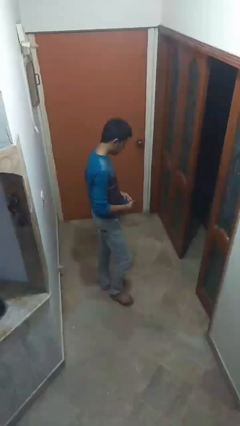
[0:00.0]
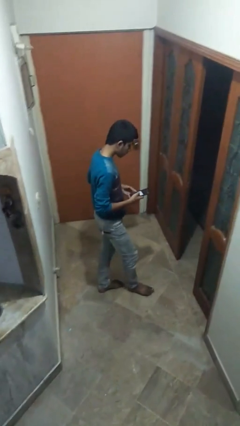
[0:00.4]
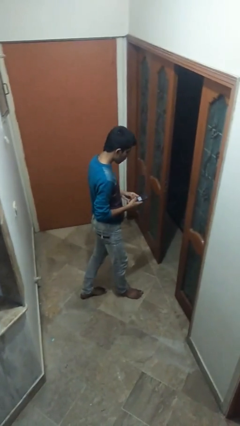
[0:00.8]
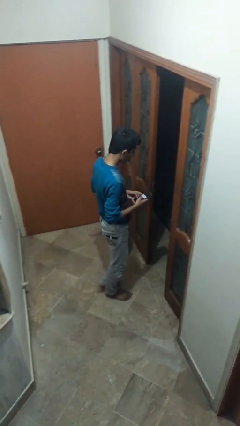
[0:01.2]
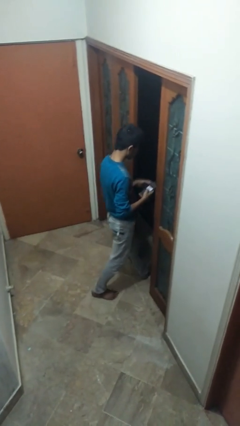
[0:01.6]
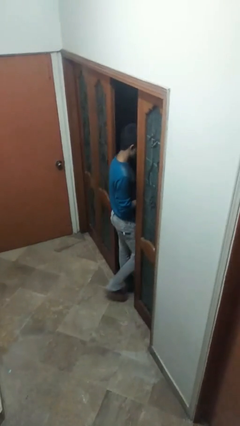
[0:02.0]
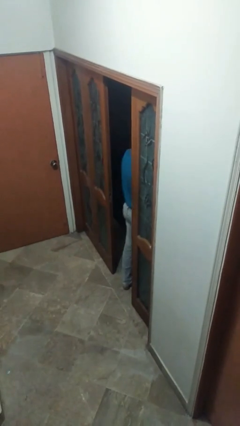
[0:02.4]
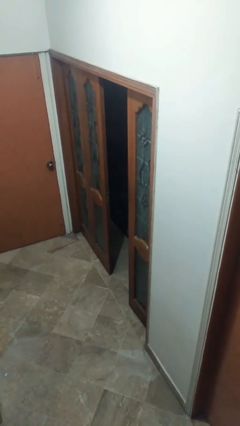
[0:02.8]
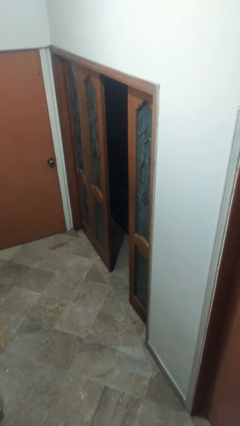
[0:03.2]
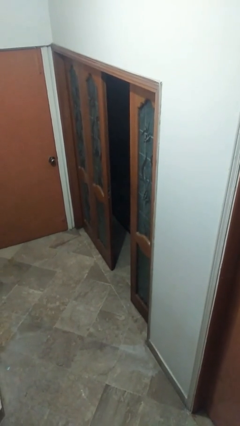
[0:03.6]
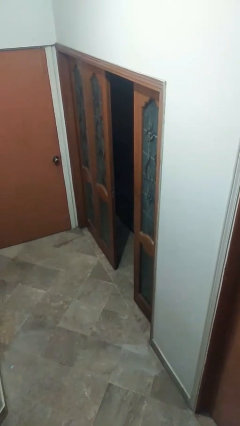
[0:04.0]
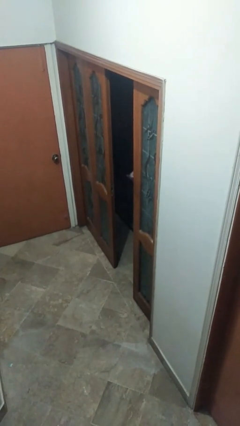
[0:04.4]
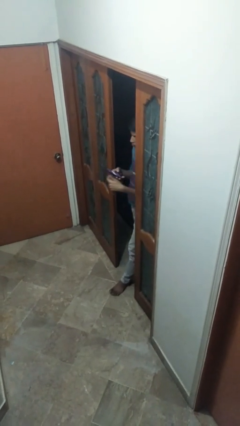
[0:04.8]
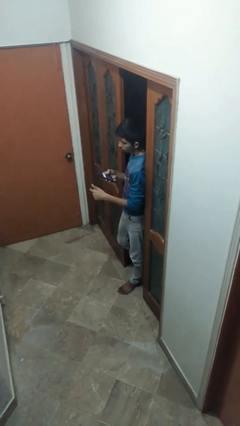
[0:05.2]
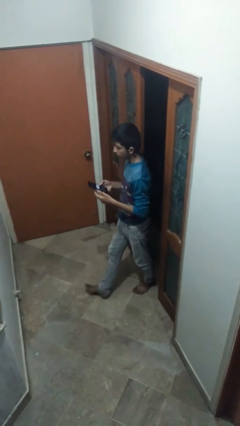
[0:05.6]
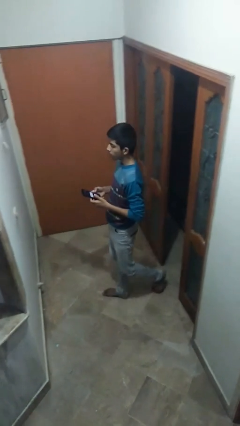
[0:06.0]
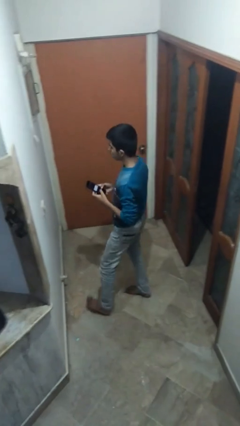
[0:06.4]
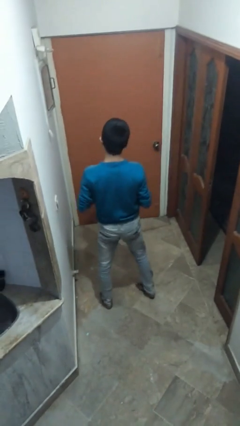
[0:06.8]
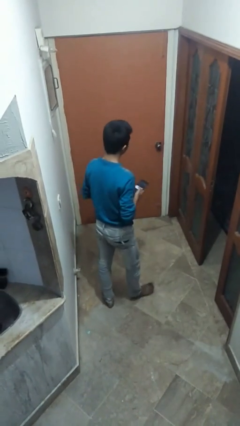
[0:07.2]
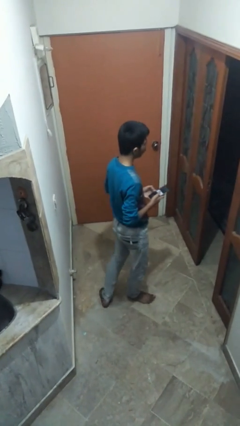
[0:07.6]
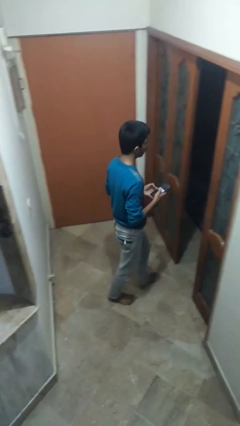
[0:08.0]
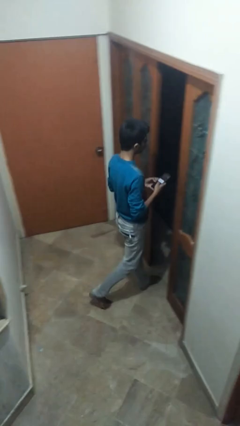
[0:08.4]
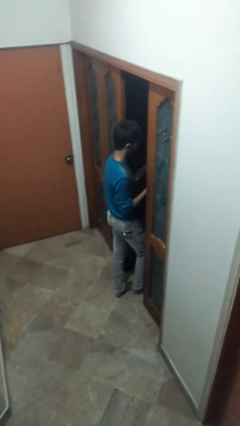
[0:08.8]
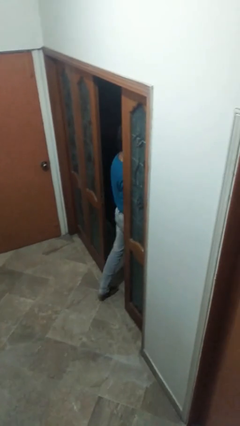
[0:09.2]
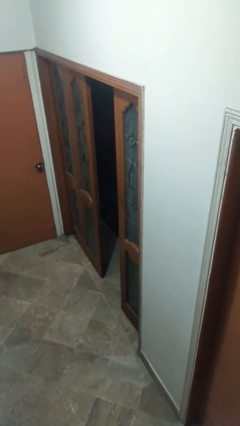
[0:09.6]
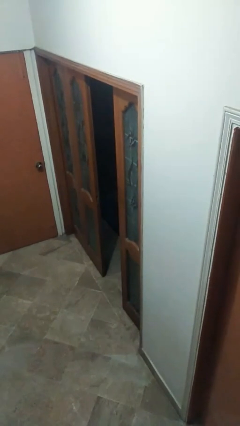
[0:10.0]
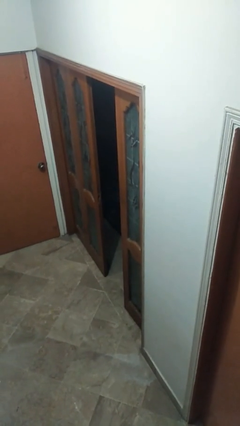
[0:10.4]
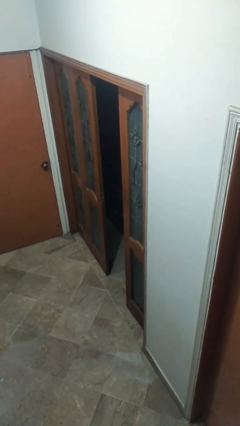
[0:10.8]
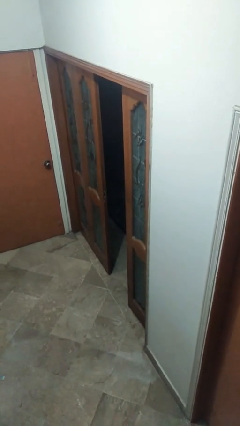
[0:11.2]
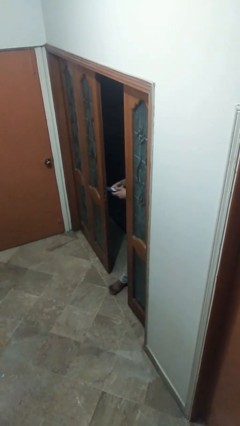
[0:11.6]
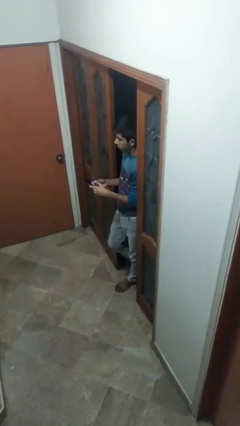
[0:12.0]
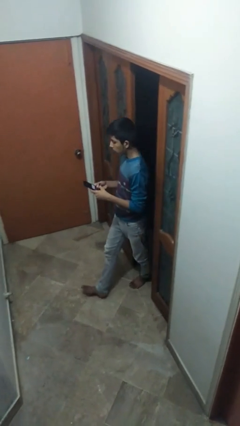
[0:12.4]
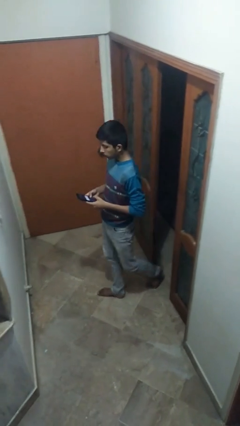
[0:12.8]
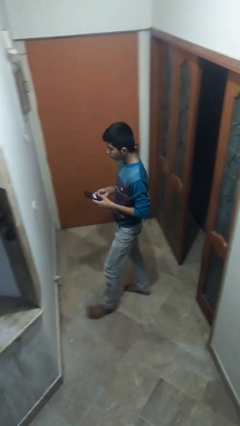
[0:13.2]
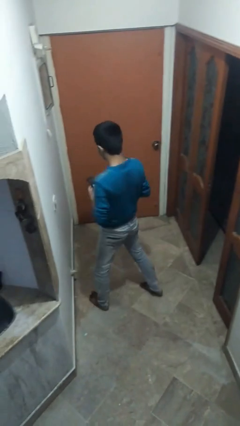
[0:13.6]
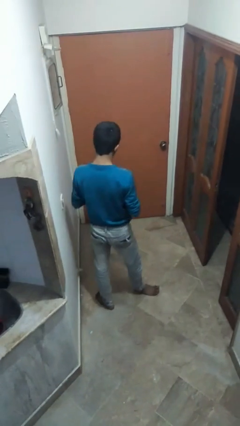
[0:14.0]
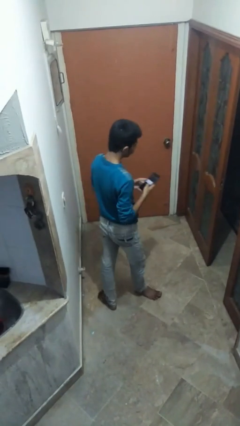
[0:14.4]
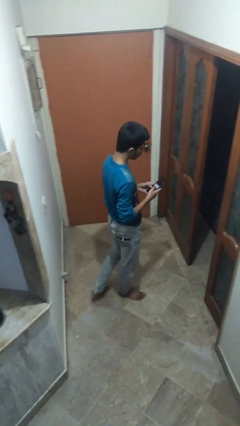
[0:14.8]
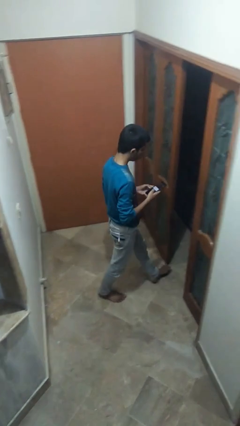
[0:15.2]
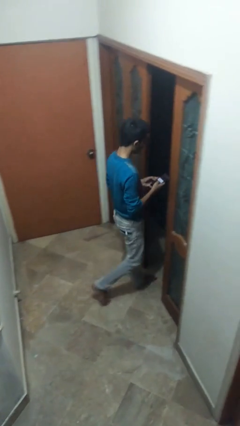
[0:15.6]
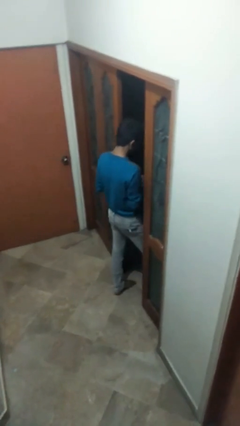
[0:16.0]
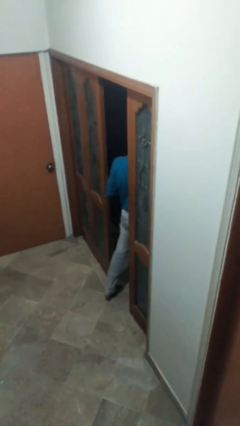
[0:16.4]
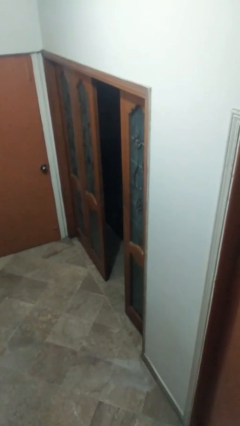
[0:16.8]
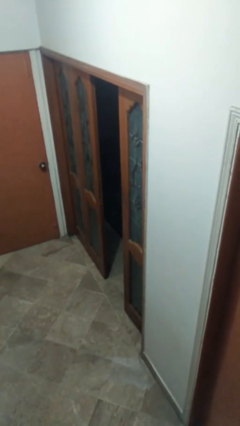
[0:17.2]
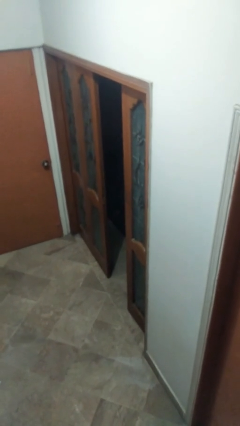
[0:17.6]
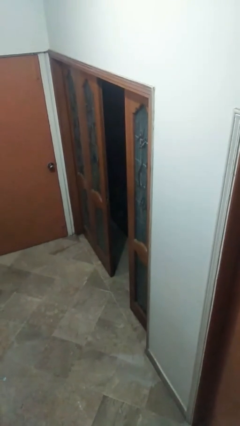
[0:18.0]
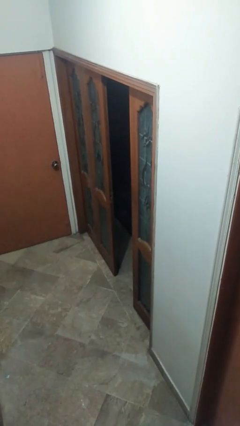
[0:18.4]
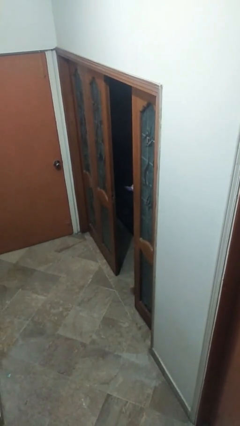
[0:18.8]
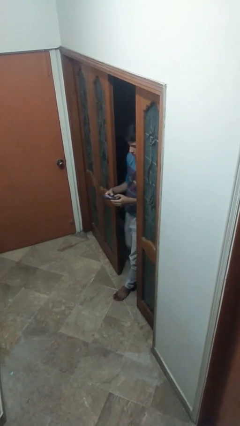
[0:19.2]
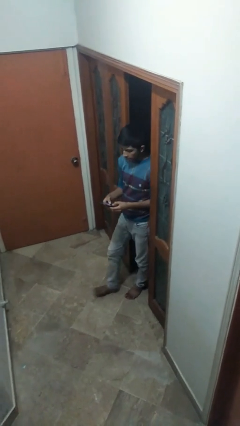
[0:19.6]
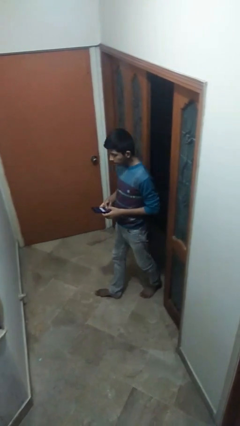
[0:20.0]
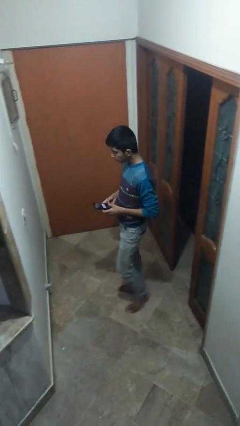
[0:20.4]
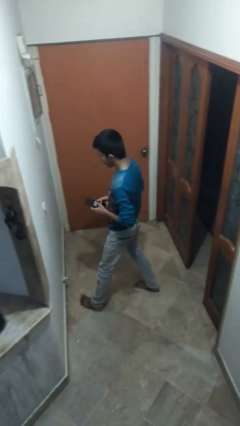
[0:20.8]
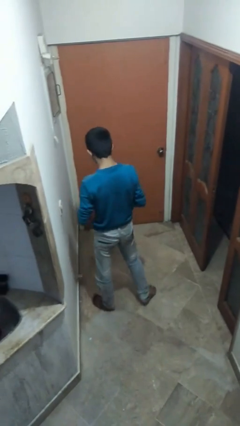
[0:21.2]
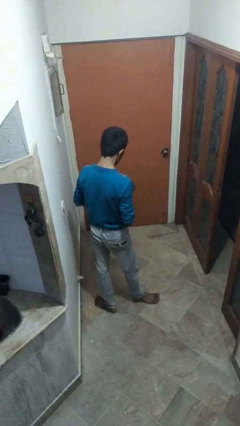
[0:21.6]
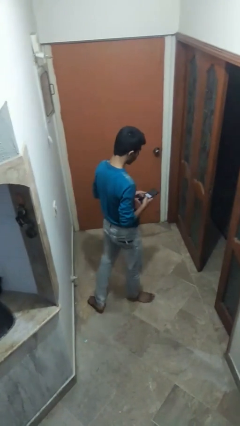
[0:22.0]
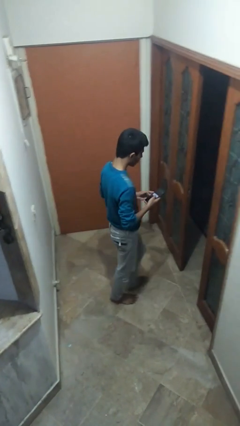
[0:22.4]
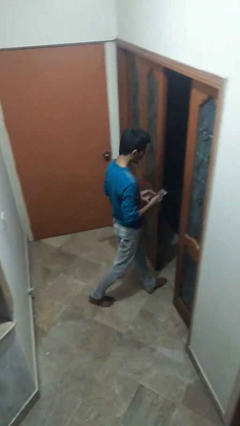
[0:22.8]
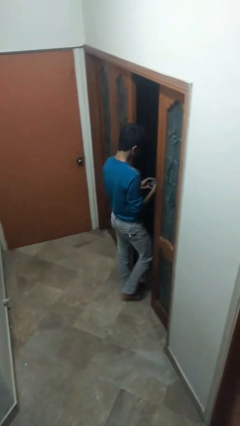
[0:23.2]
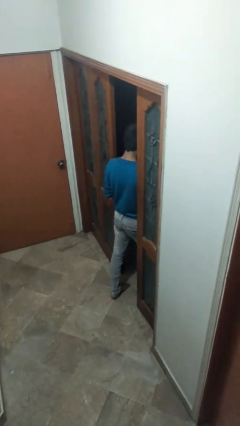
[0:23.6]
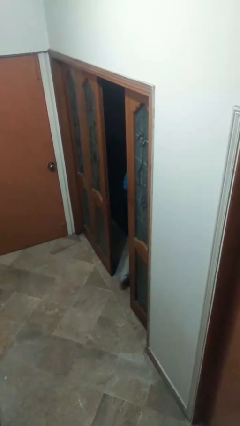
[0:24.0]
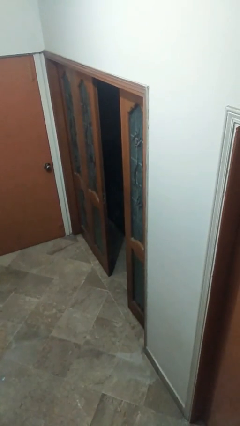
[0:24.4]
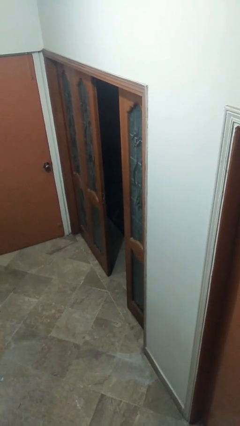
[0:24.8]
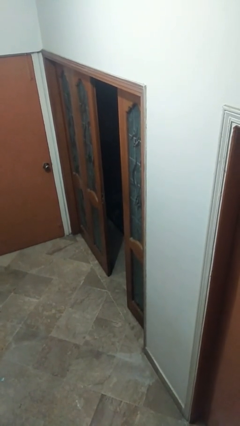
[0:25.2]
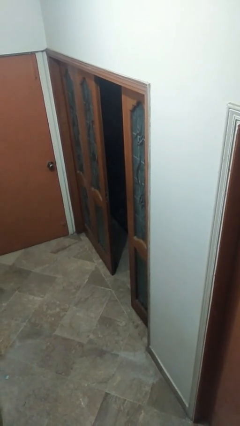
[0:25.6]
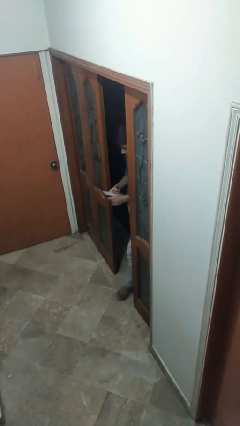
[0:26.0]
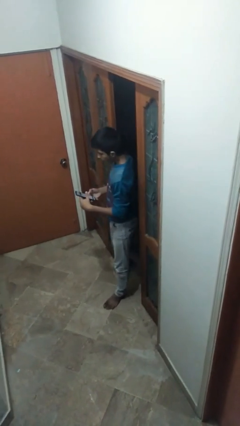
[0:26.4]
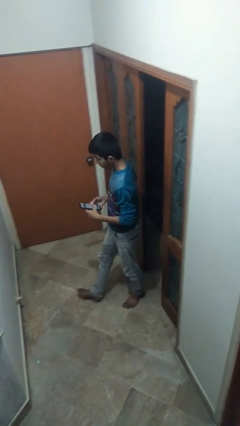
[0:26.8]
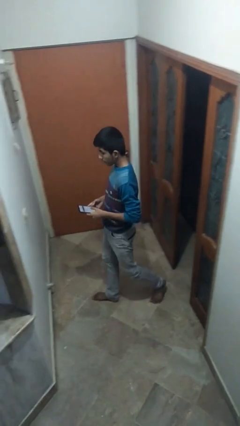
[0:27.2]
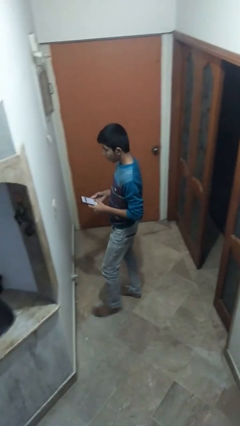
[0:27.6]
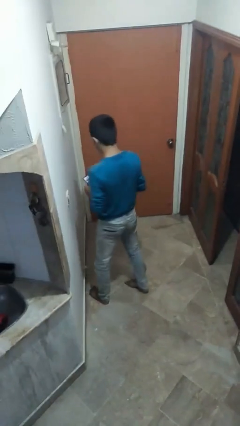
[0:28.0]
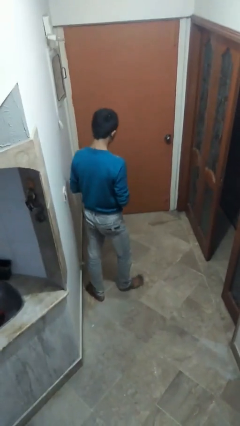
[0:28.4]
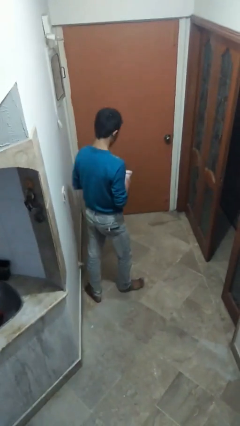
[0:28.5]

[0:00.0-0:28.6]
person texts on phone

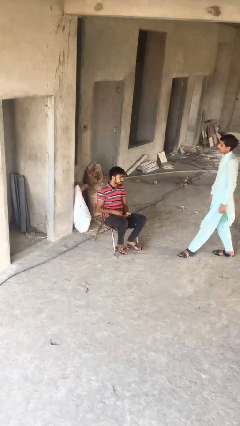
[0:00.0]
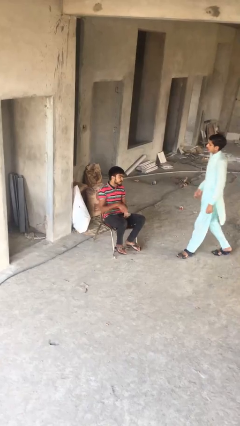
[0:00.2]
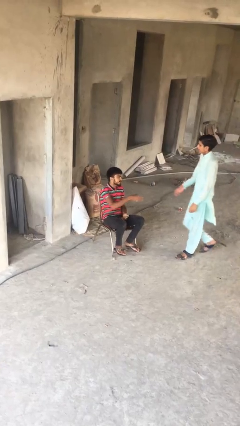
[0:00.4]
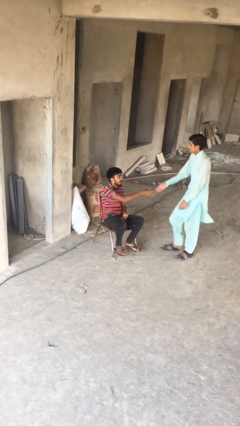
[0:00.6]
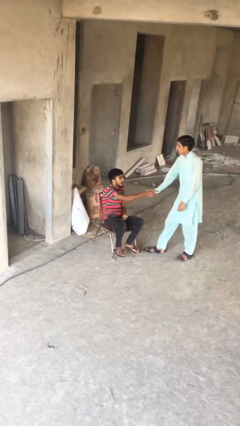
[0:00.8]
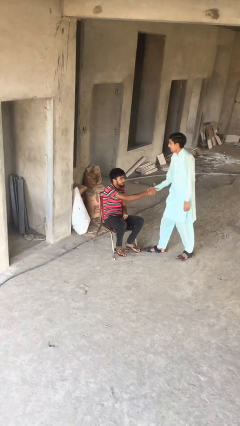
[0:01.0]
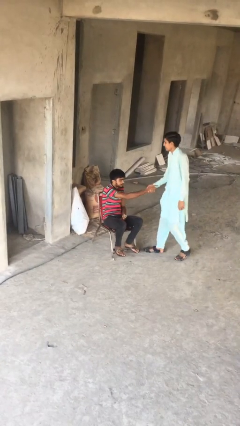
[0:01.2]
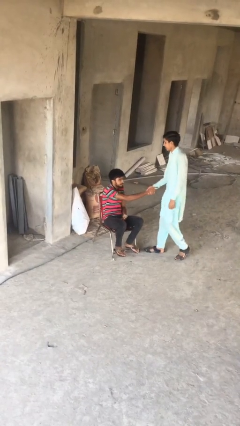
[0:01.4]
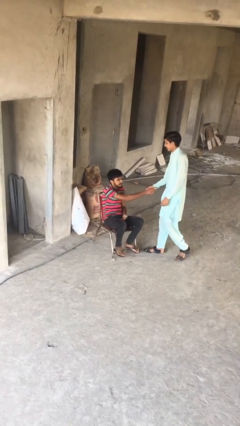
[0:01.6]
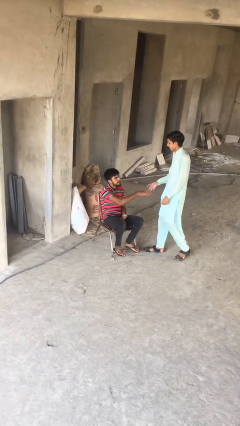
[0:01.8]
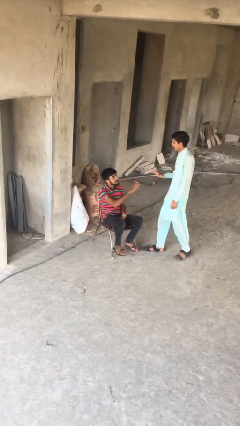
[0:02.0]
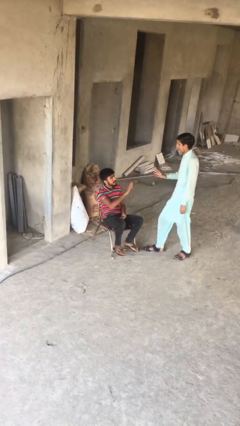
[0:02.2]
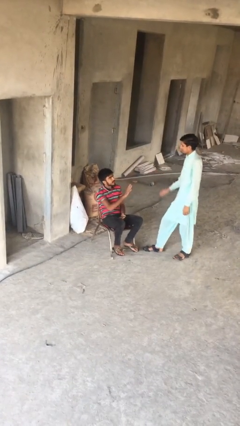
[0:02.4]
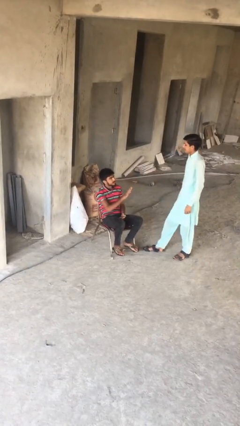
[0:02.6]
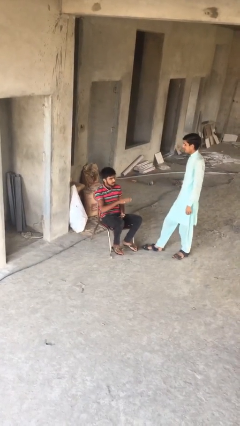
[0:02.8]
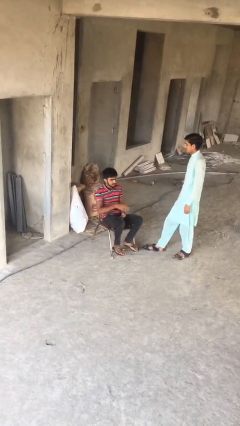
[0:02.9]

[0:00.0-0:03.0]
person shakes hand

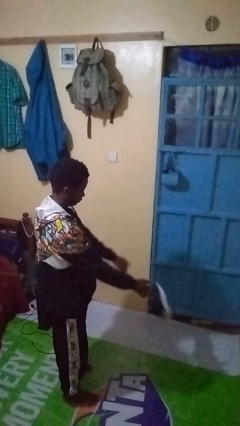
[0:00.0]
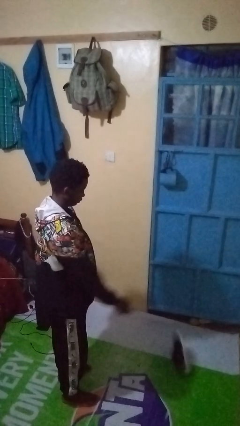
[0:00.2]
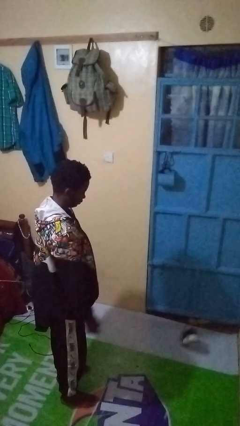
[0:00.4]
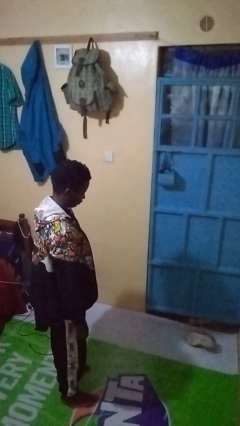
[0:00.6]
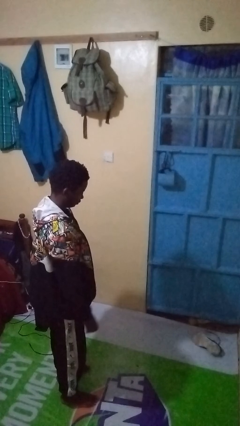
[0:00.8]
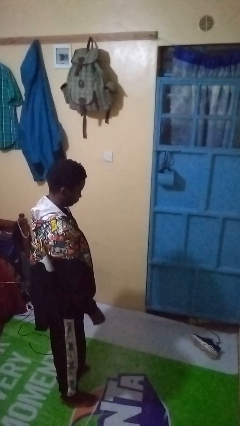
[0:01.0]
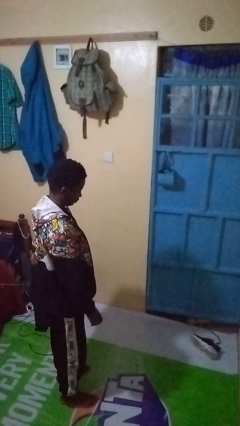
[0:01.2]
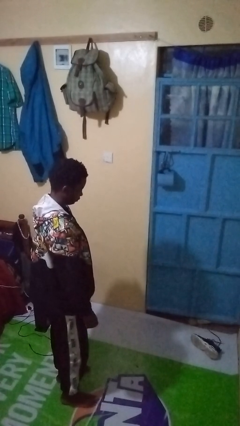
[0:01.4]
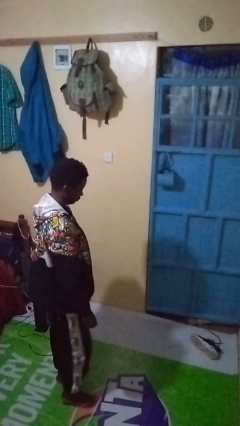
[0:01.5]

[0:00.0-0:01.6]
person throws object to ground
